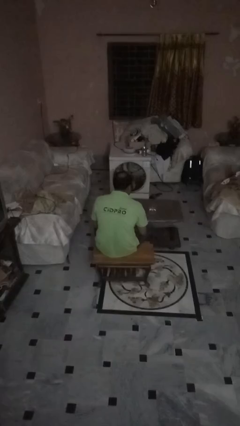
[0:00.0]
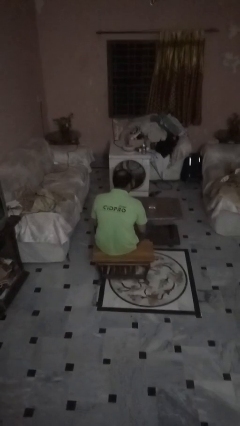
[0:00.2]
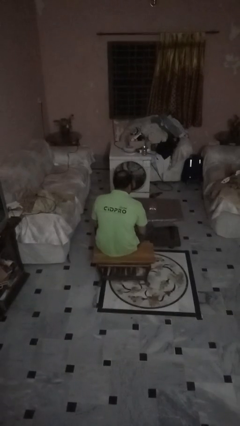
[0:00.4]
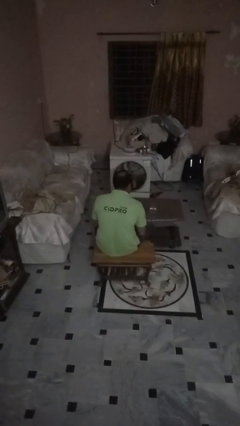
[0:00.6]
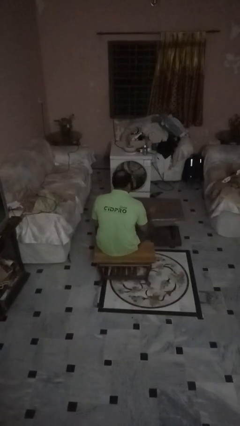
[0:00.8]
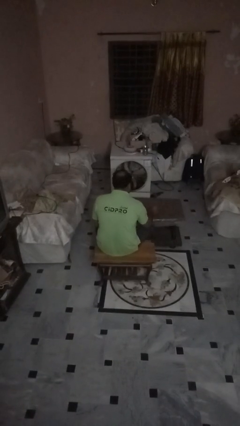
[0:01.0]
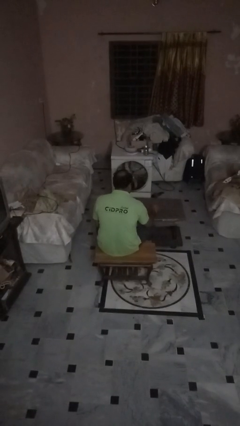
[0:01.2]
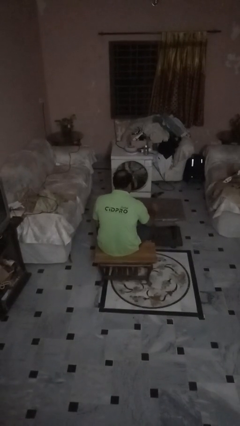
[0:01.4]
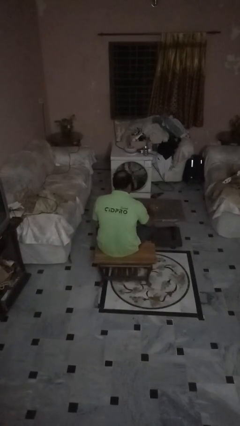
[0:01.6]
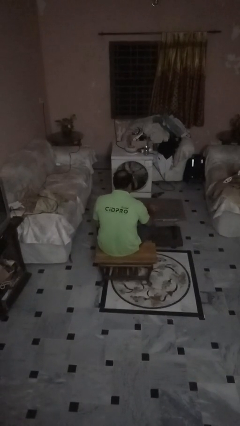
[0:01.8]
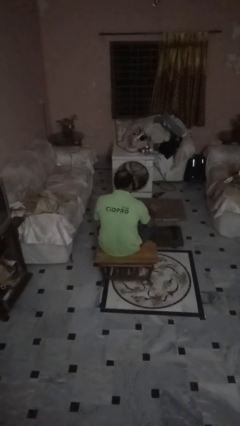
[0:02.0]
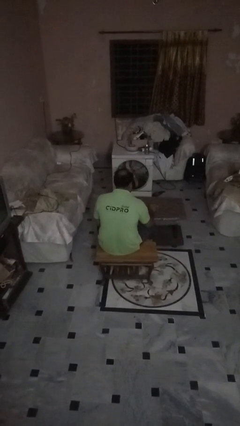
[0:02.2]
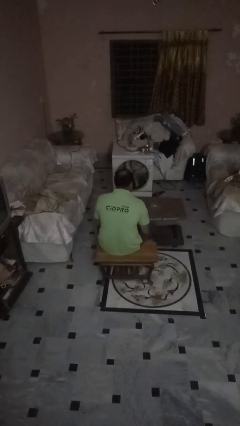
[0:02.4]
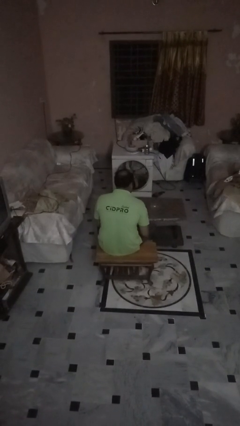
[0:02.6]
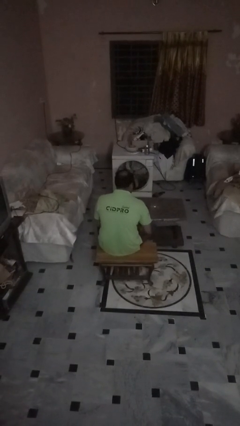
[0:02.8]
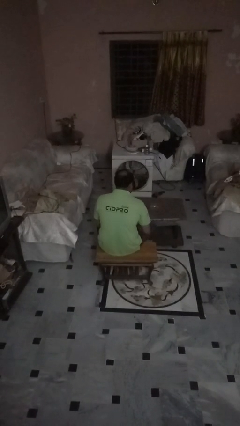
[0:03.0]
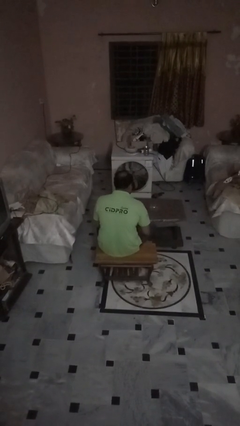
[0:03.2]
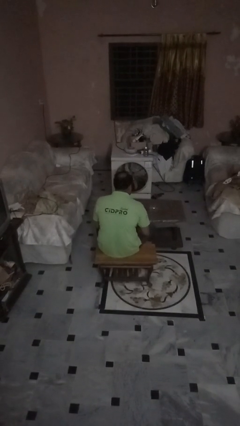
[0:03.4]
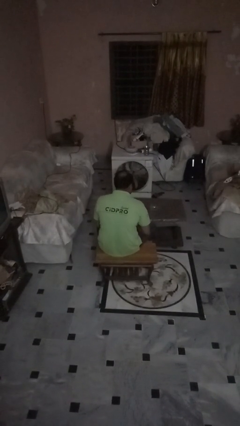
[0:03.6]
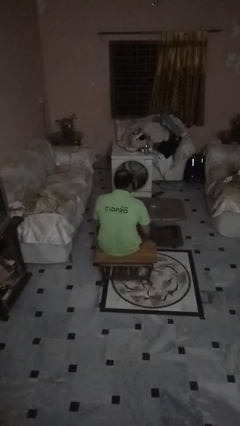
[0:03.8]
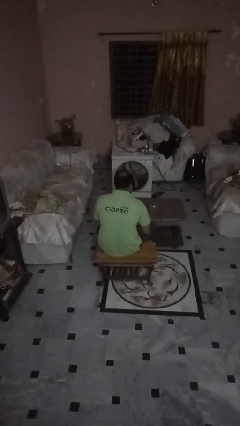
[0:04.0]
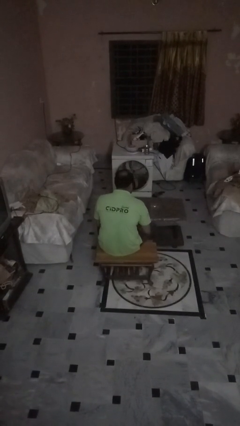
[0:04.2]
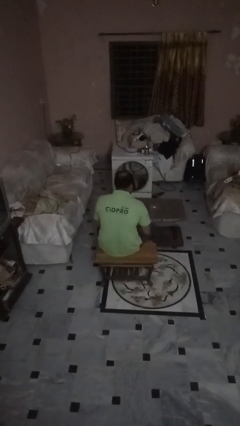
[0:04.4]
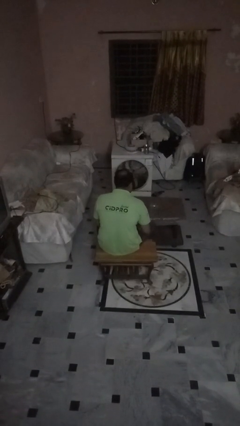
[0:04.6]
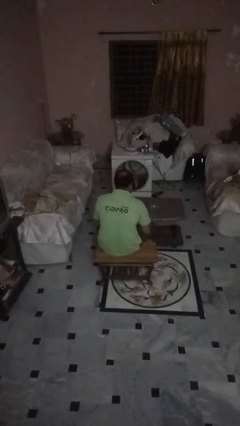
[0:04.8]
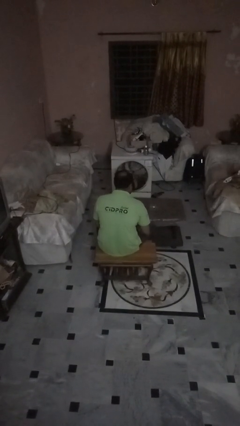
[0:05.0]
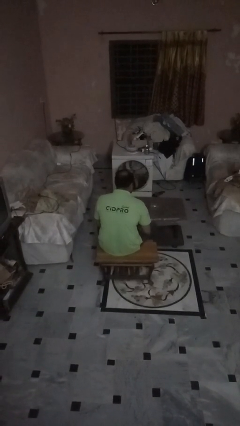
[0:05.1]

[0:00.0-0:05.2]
person spills on table

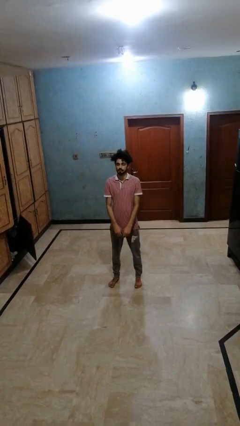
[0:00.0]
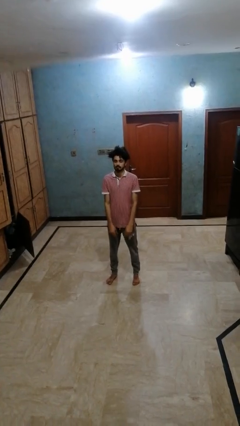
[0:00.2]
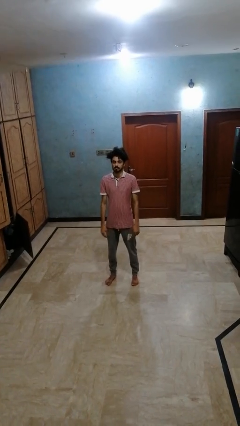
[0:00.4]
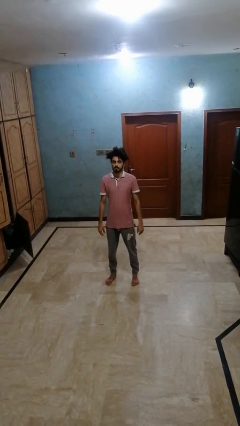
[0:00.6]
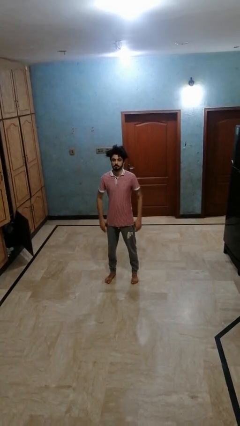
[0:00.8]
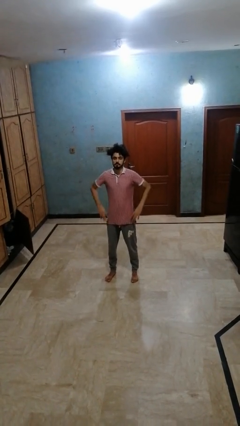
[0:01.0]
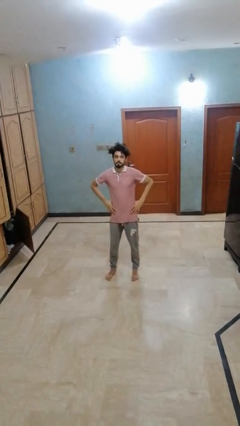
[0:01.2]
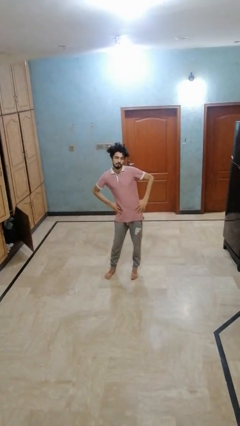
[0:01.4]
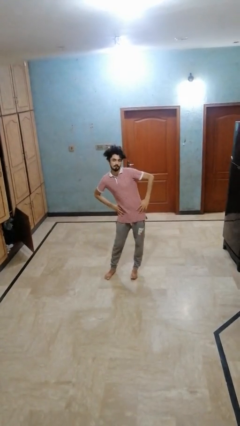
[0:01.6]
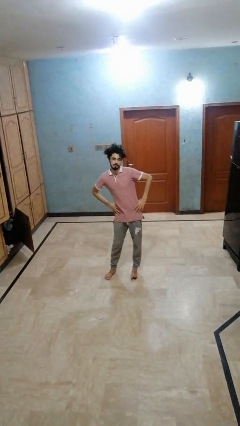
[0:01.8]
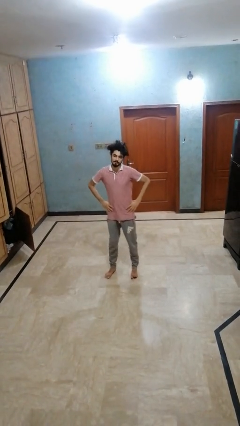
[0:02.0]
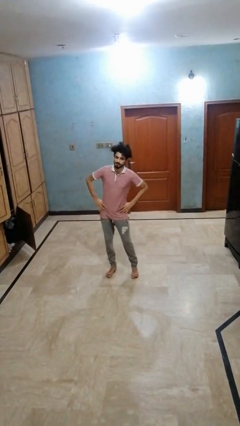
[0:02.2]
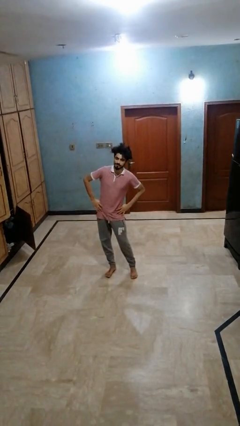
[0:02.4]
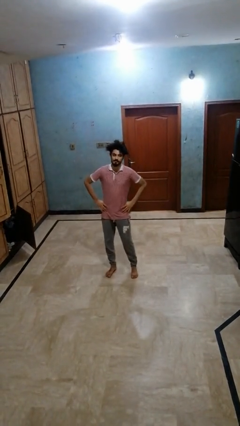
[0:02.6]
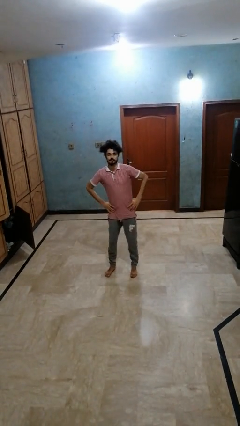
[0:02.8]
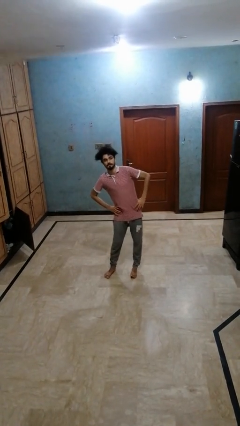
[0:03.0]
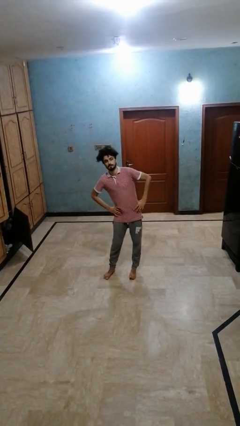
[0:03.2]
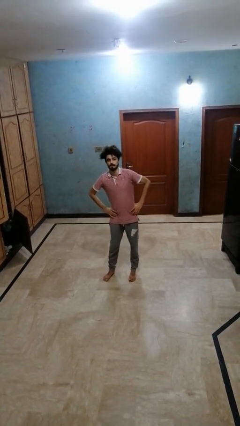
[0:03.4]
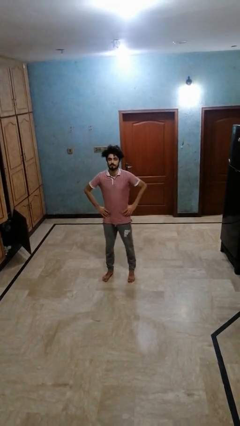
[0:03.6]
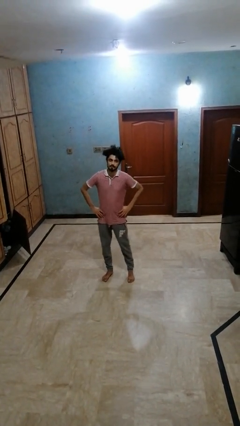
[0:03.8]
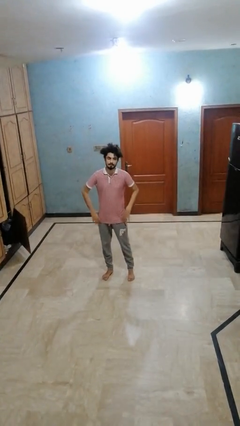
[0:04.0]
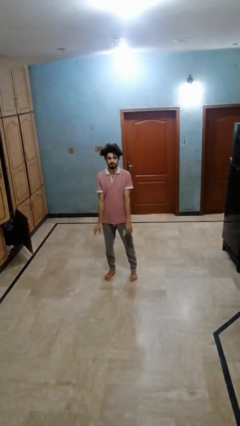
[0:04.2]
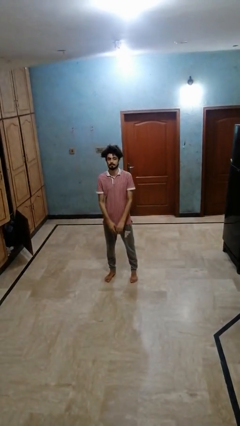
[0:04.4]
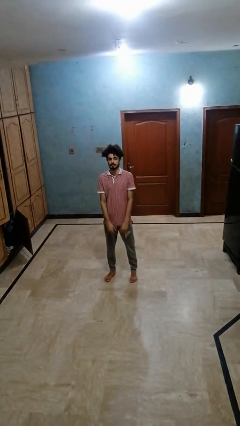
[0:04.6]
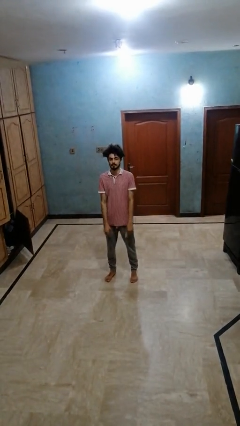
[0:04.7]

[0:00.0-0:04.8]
person wiggles hips

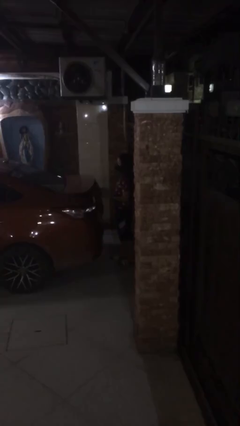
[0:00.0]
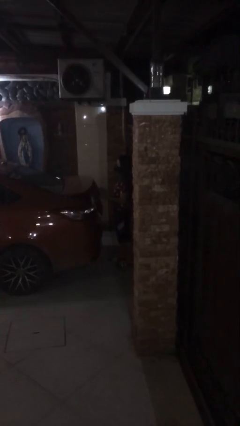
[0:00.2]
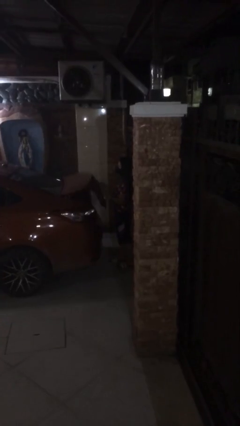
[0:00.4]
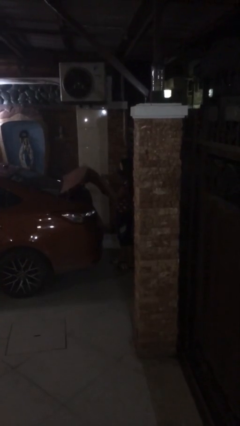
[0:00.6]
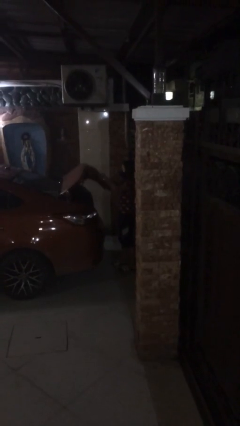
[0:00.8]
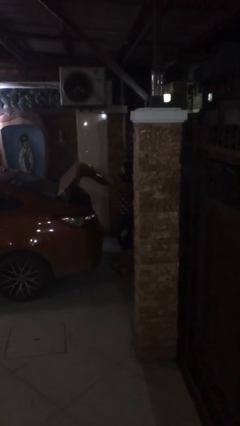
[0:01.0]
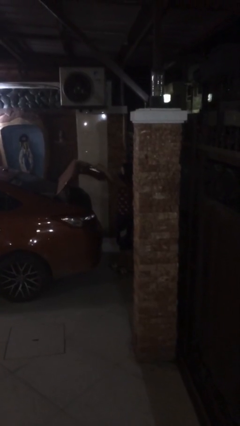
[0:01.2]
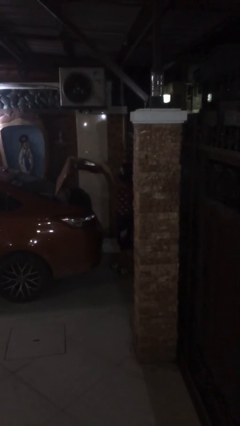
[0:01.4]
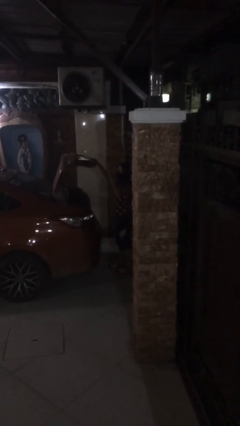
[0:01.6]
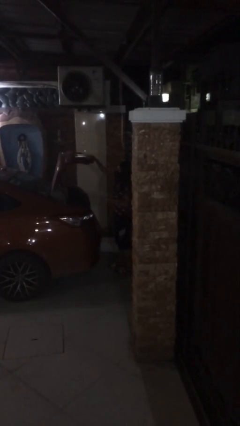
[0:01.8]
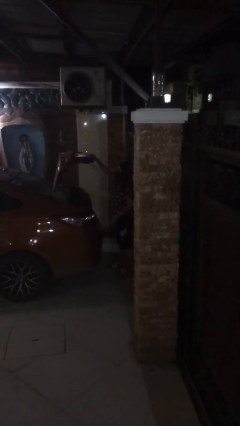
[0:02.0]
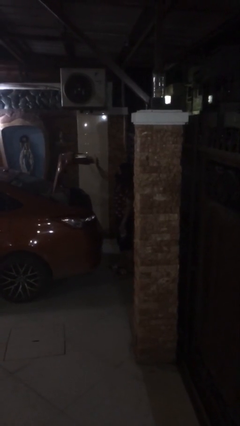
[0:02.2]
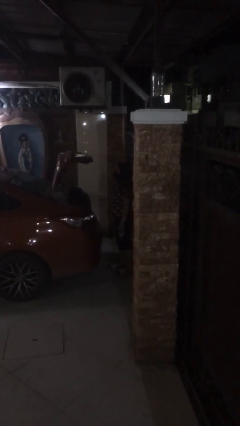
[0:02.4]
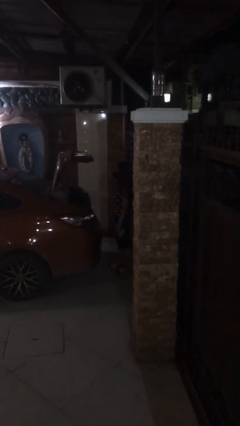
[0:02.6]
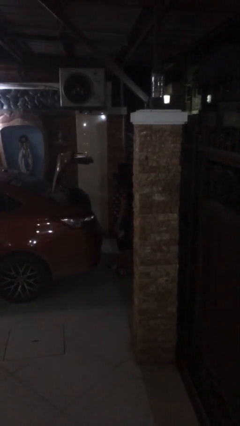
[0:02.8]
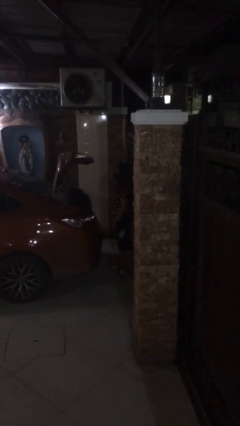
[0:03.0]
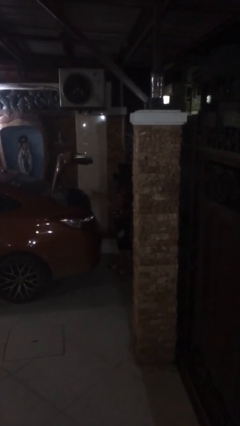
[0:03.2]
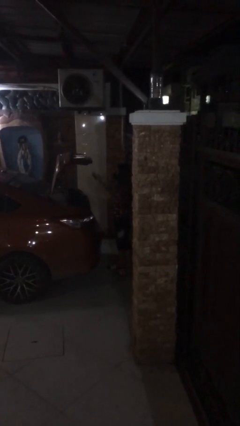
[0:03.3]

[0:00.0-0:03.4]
person opens car trunk

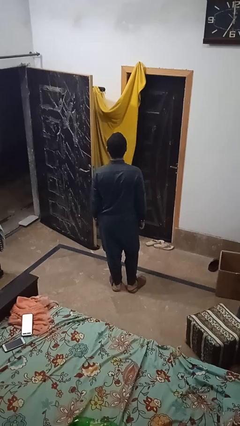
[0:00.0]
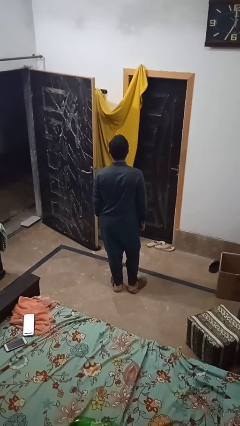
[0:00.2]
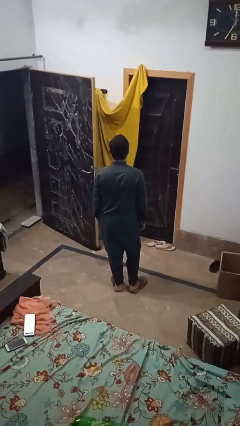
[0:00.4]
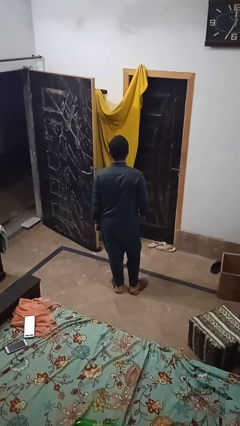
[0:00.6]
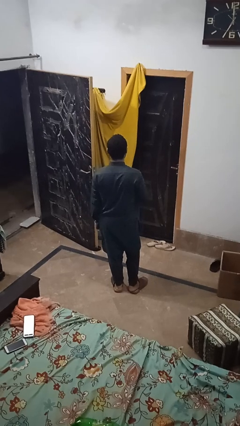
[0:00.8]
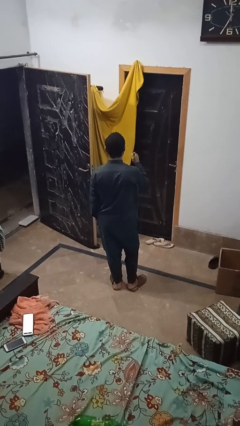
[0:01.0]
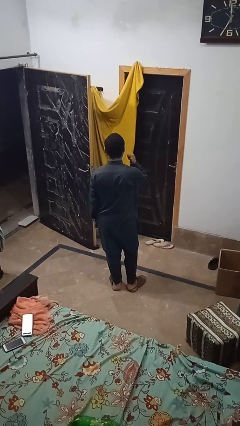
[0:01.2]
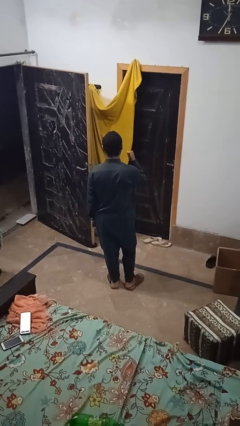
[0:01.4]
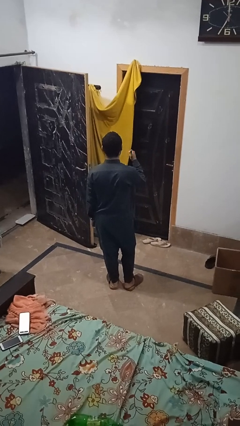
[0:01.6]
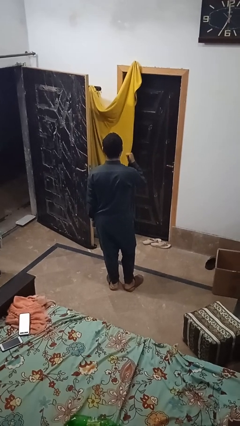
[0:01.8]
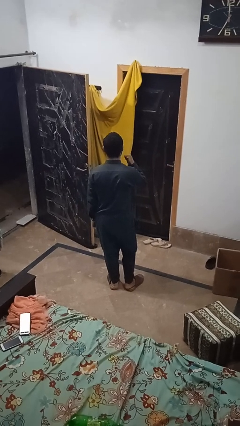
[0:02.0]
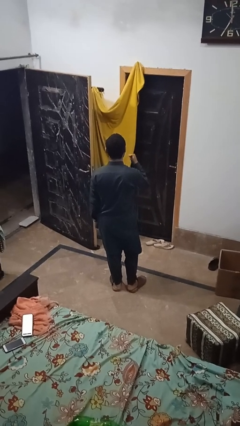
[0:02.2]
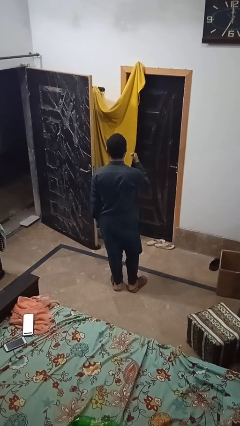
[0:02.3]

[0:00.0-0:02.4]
person gestures behind me

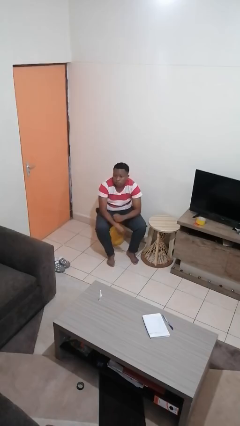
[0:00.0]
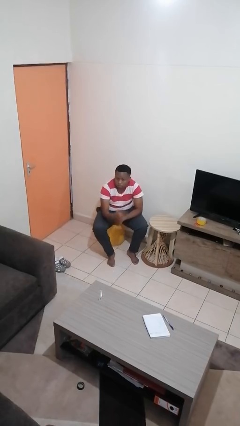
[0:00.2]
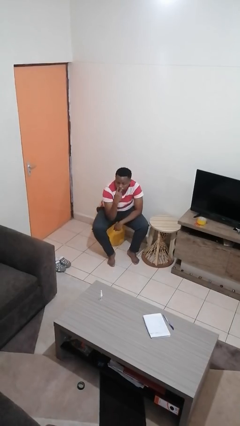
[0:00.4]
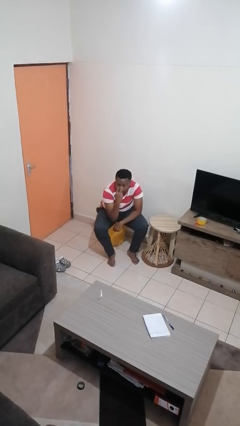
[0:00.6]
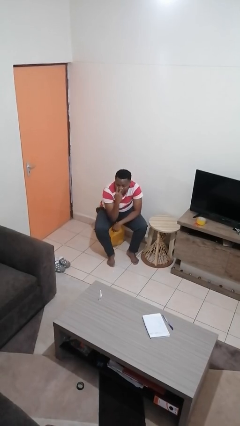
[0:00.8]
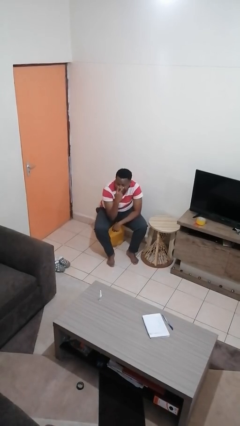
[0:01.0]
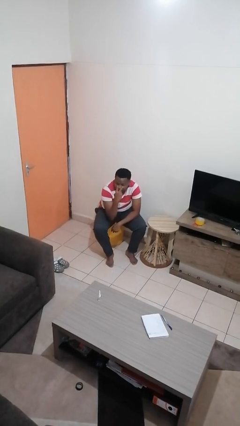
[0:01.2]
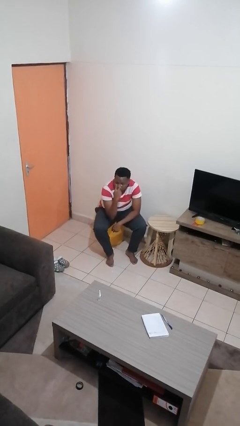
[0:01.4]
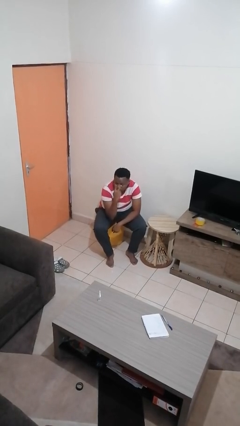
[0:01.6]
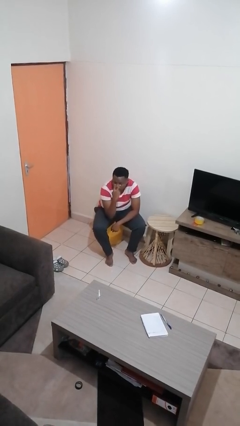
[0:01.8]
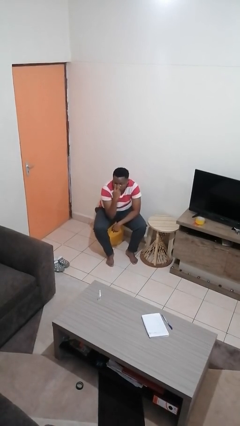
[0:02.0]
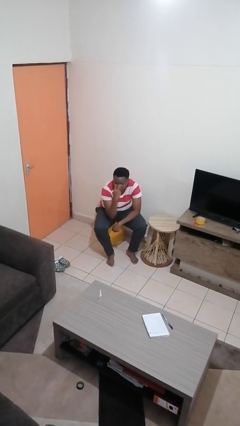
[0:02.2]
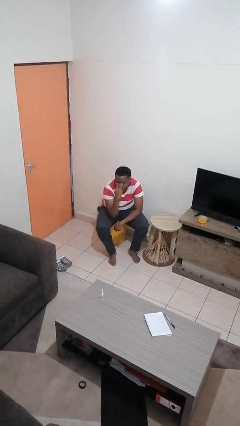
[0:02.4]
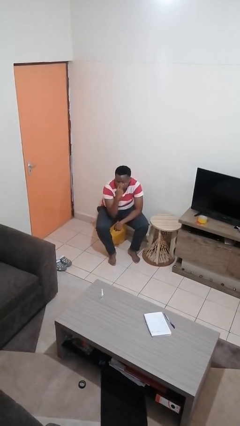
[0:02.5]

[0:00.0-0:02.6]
person gestures watch closely
